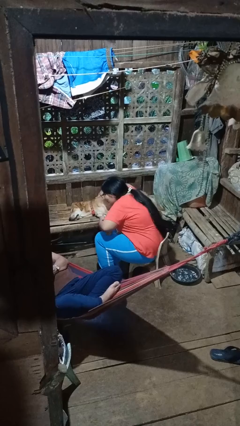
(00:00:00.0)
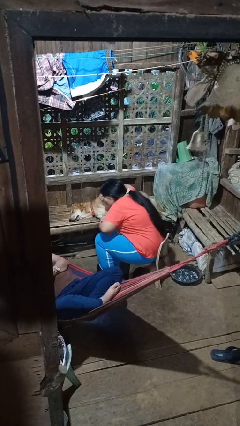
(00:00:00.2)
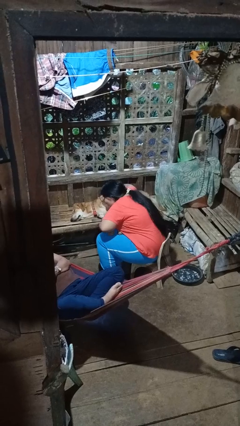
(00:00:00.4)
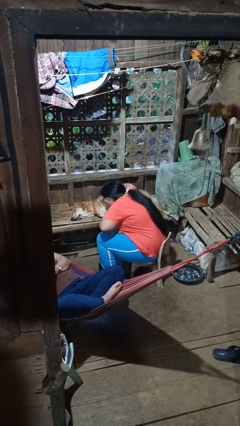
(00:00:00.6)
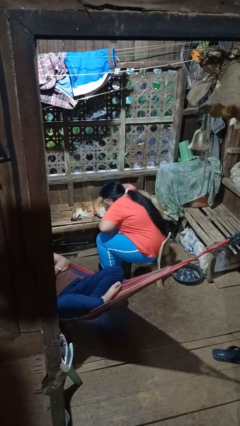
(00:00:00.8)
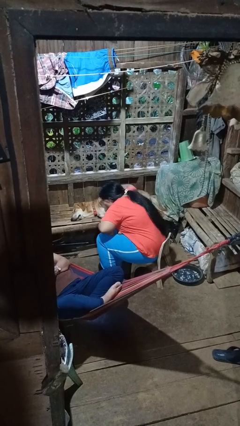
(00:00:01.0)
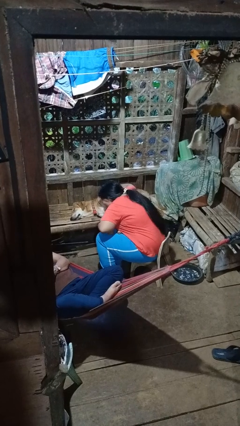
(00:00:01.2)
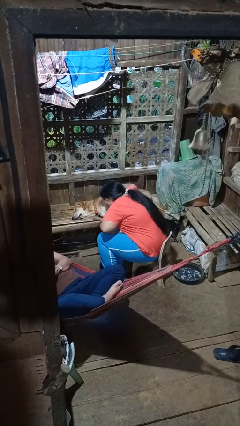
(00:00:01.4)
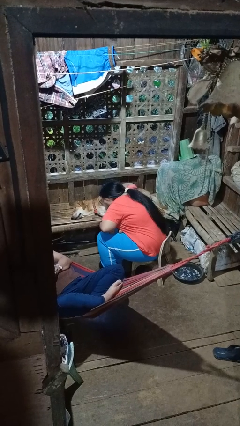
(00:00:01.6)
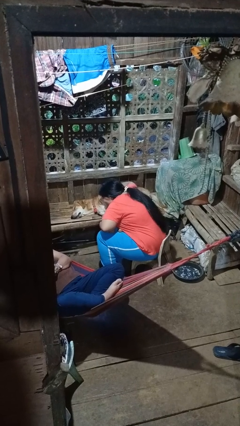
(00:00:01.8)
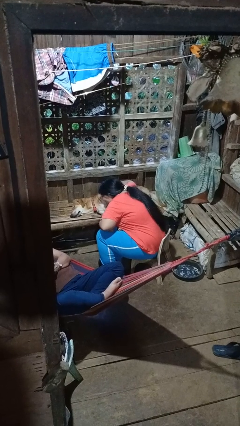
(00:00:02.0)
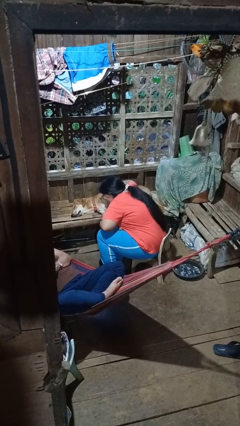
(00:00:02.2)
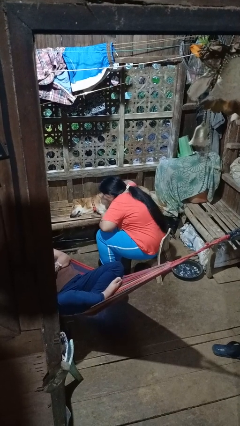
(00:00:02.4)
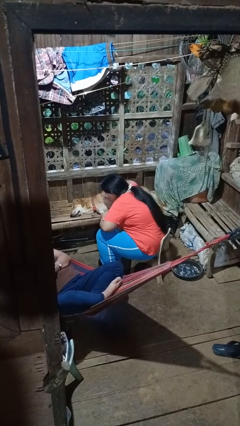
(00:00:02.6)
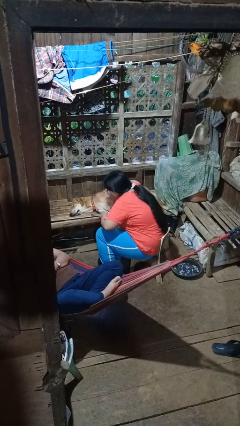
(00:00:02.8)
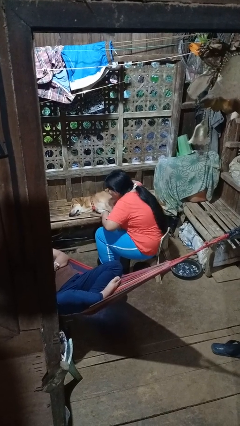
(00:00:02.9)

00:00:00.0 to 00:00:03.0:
person hugs dog

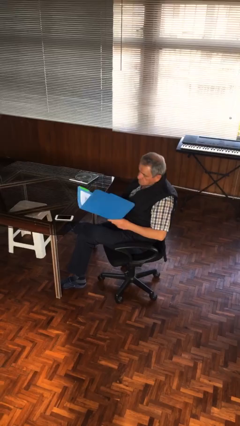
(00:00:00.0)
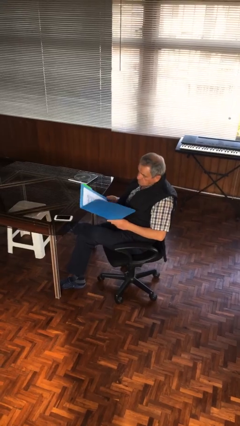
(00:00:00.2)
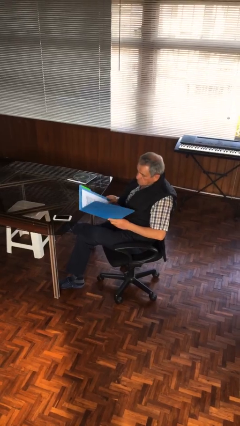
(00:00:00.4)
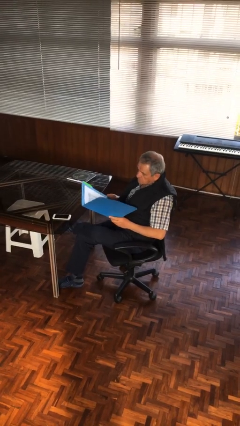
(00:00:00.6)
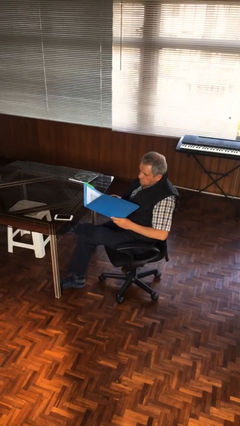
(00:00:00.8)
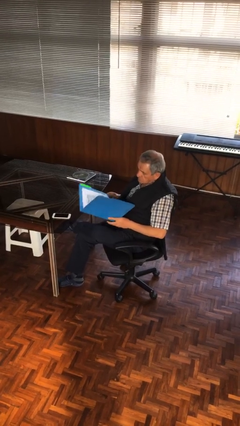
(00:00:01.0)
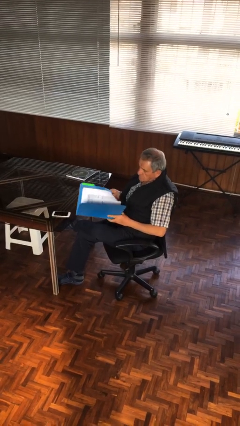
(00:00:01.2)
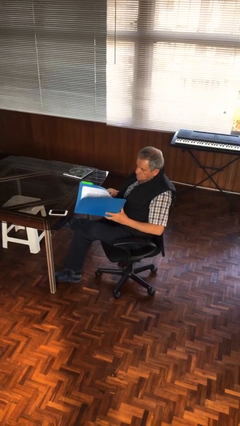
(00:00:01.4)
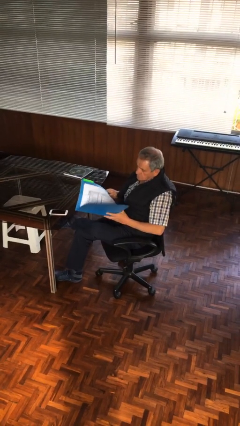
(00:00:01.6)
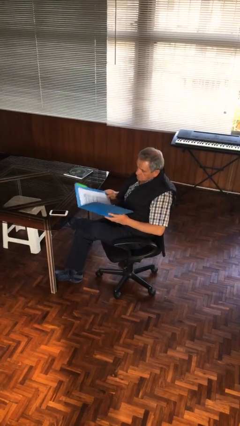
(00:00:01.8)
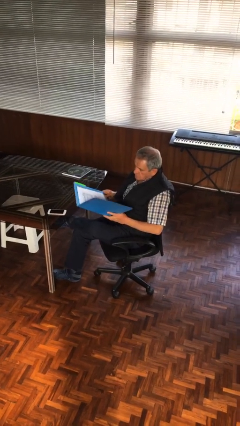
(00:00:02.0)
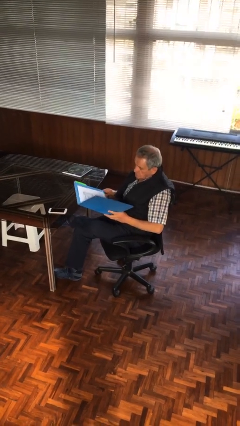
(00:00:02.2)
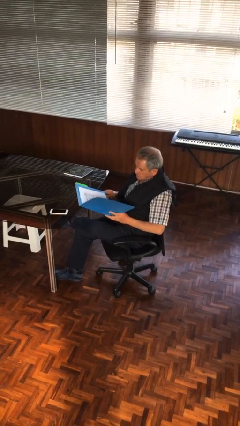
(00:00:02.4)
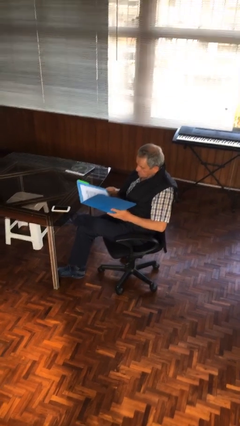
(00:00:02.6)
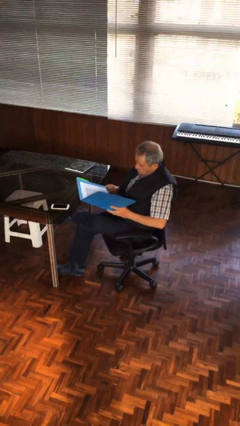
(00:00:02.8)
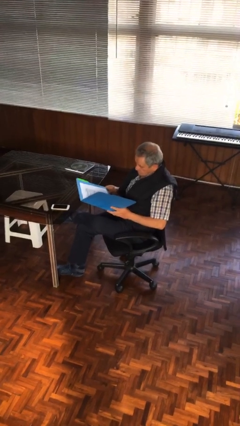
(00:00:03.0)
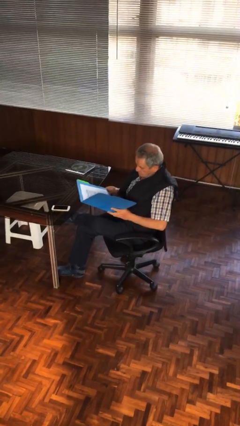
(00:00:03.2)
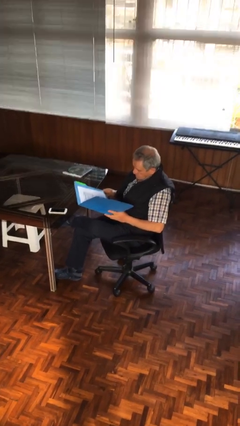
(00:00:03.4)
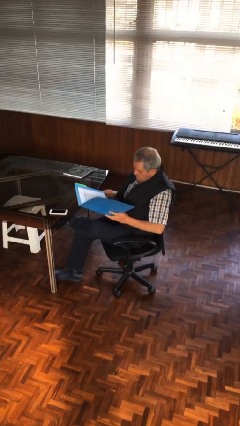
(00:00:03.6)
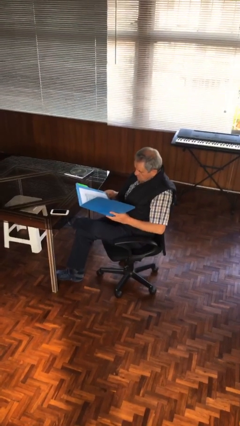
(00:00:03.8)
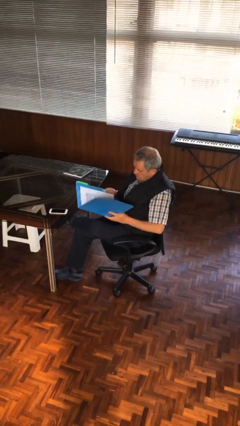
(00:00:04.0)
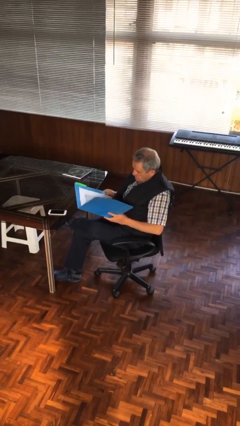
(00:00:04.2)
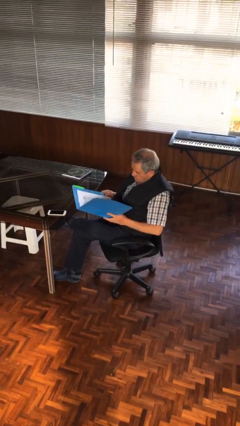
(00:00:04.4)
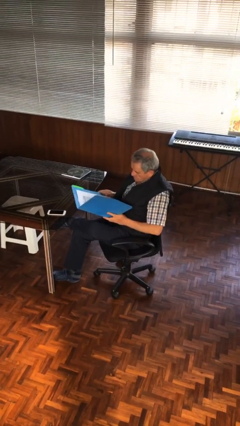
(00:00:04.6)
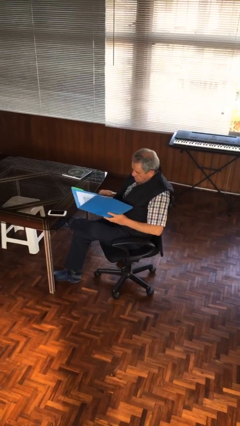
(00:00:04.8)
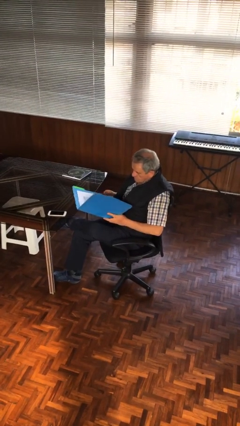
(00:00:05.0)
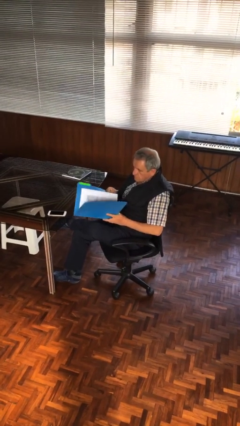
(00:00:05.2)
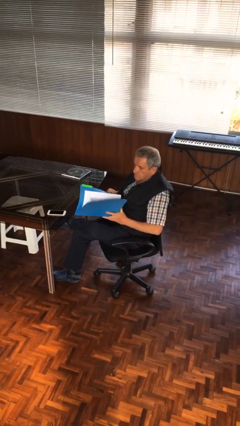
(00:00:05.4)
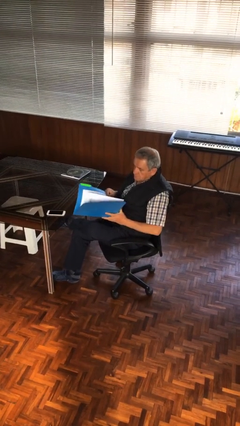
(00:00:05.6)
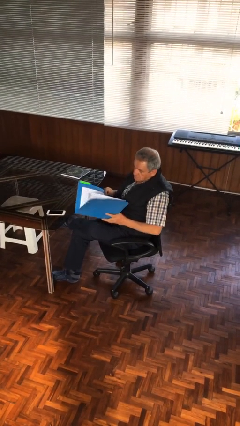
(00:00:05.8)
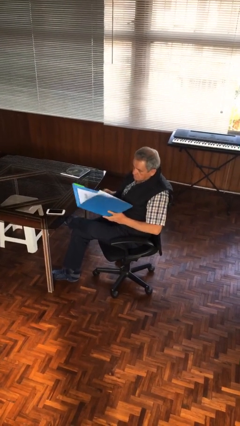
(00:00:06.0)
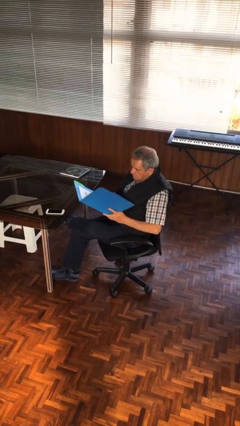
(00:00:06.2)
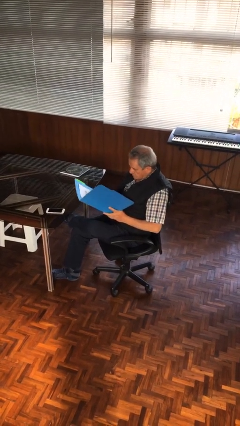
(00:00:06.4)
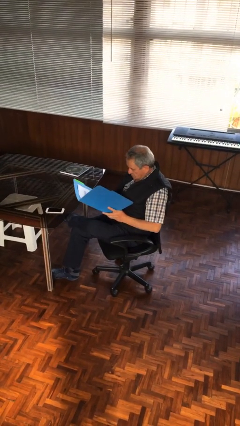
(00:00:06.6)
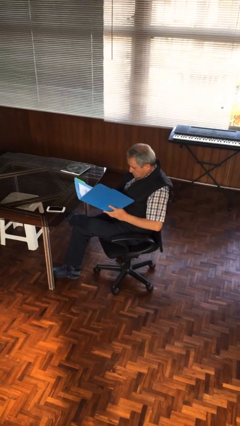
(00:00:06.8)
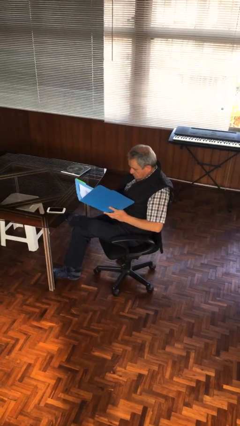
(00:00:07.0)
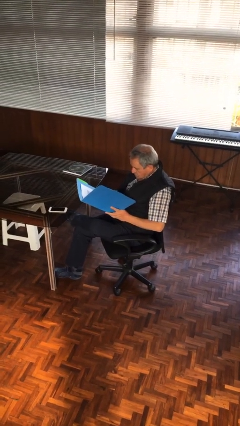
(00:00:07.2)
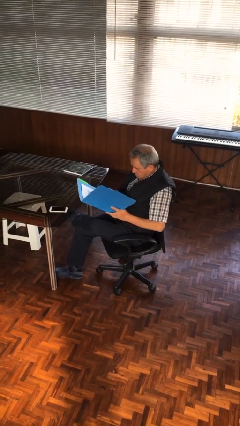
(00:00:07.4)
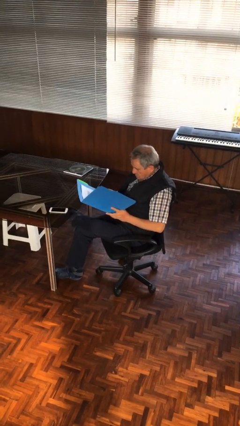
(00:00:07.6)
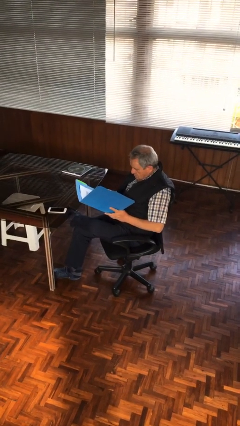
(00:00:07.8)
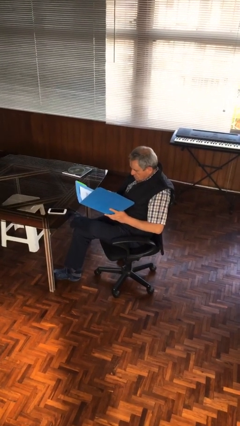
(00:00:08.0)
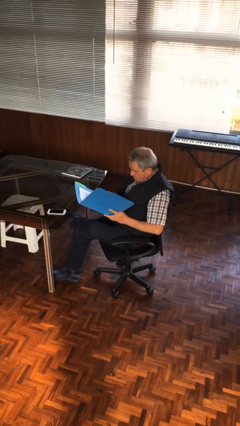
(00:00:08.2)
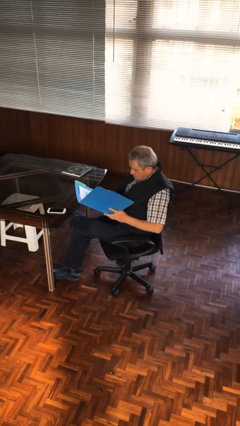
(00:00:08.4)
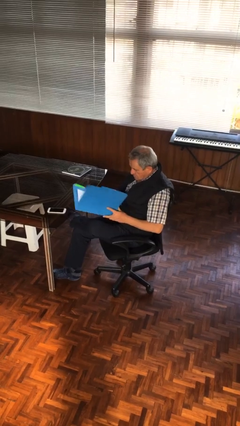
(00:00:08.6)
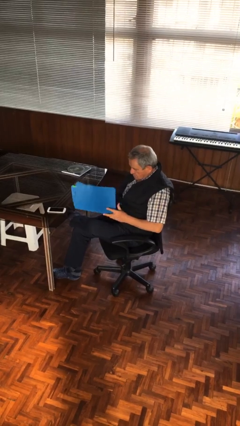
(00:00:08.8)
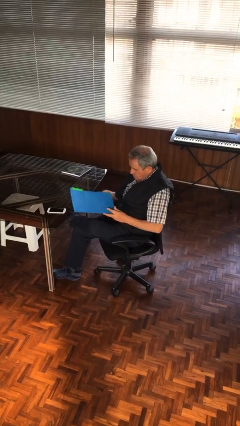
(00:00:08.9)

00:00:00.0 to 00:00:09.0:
person reads document

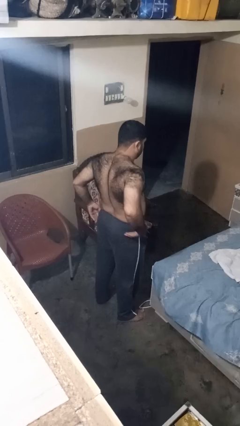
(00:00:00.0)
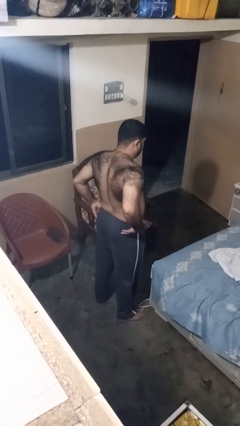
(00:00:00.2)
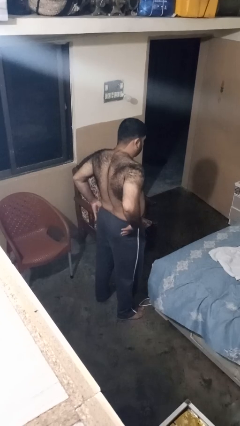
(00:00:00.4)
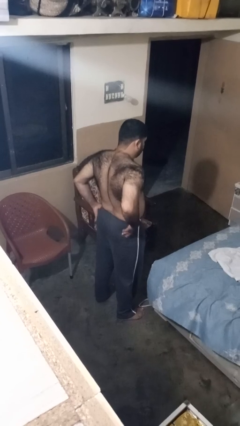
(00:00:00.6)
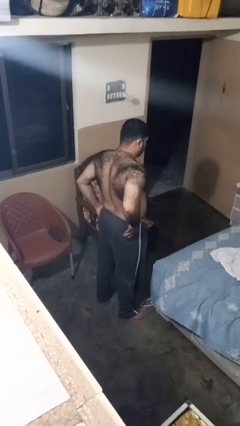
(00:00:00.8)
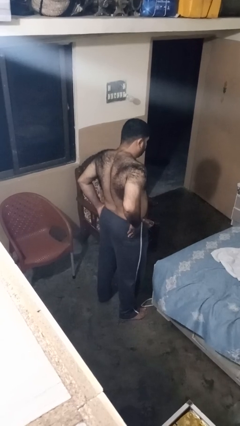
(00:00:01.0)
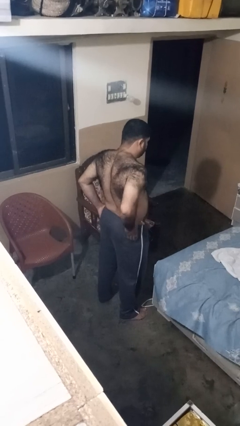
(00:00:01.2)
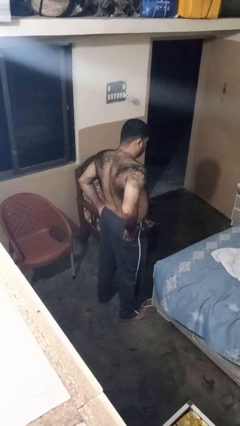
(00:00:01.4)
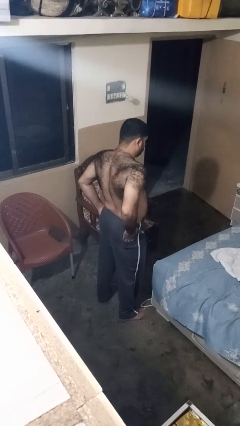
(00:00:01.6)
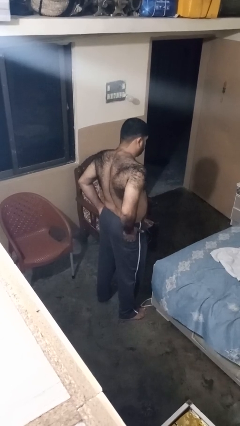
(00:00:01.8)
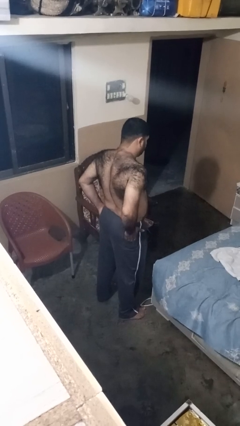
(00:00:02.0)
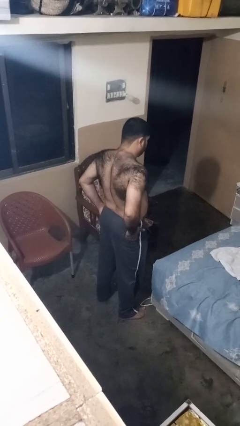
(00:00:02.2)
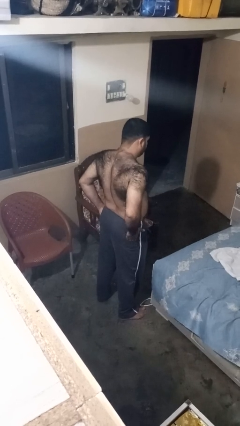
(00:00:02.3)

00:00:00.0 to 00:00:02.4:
person puts hands in back pockets

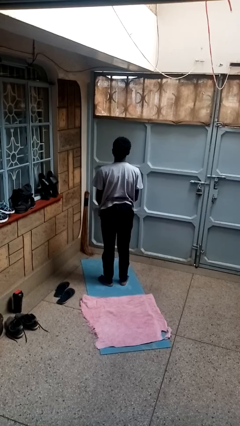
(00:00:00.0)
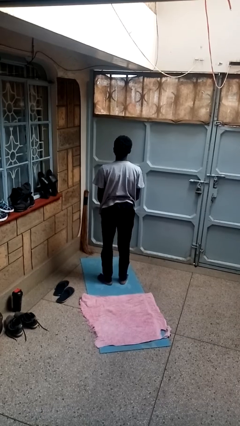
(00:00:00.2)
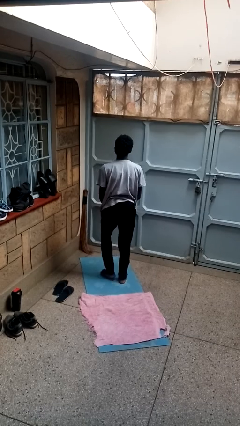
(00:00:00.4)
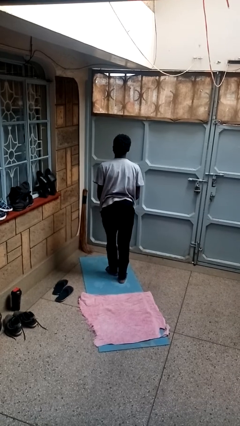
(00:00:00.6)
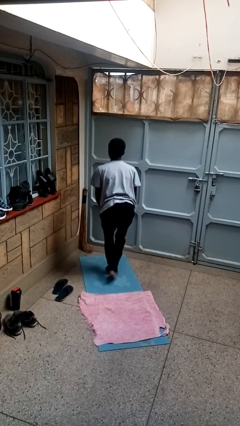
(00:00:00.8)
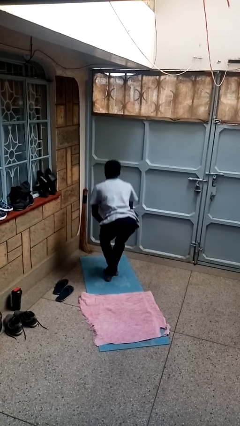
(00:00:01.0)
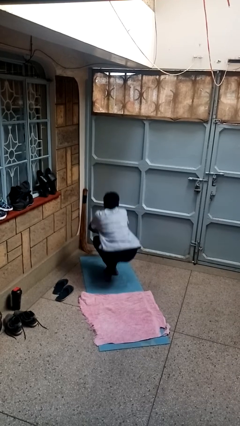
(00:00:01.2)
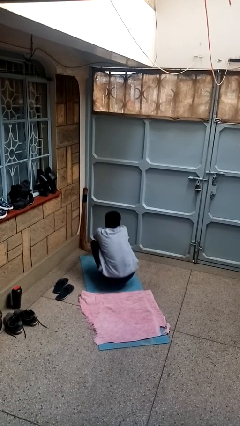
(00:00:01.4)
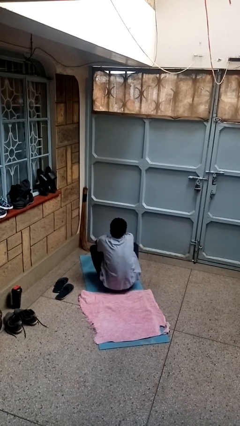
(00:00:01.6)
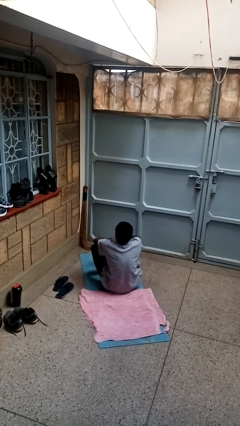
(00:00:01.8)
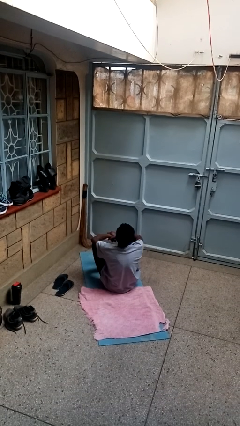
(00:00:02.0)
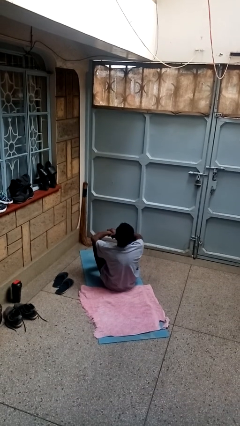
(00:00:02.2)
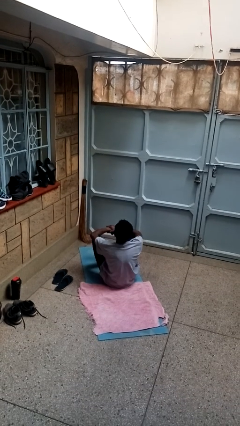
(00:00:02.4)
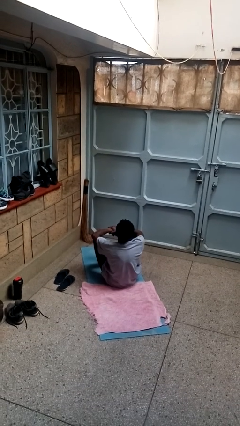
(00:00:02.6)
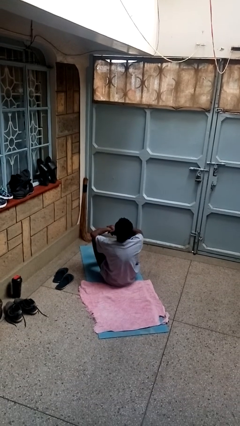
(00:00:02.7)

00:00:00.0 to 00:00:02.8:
person sits crisscross

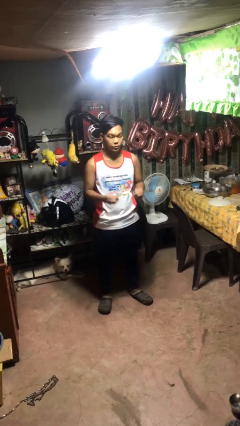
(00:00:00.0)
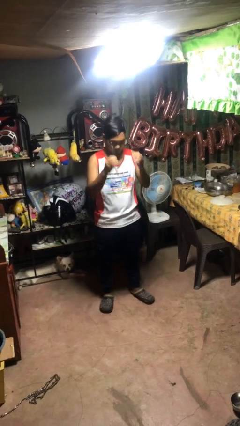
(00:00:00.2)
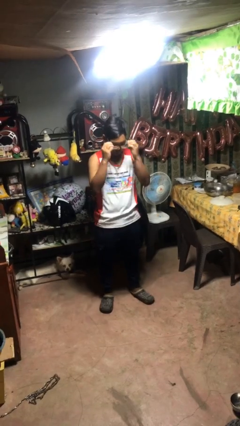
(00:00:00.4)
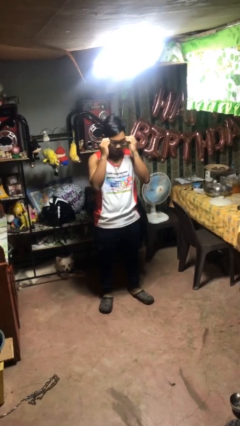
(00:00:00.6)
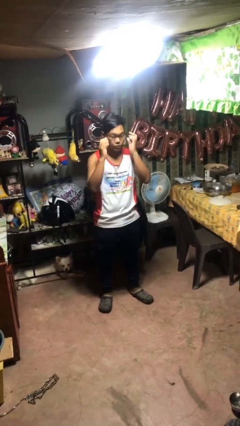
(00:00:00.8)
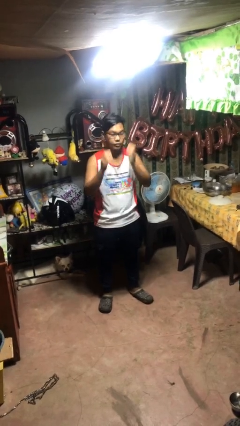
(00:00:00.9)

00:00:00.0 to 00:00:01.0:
person puts on glasses
